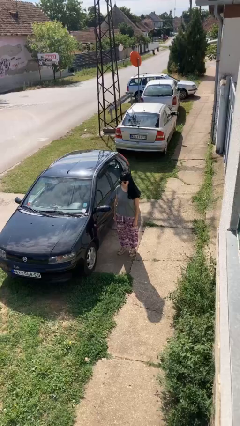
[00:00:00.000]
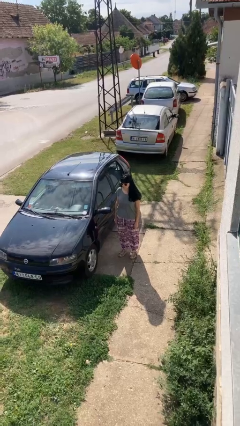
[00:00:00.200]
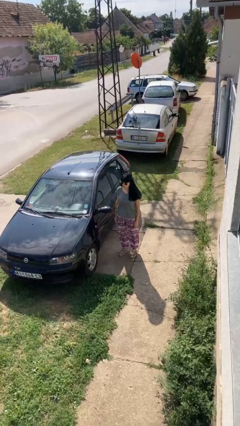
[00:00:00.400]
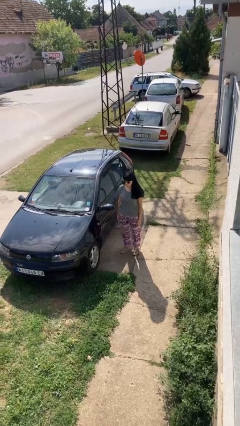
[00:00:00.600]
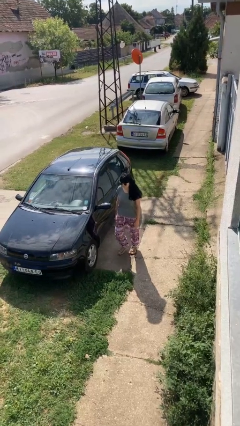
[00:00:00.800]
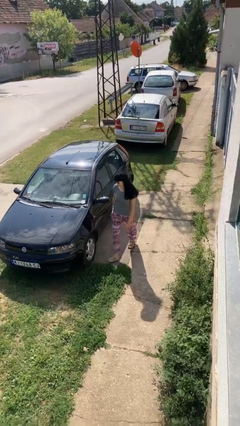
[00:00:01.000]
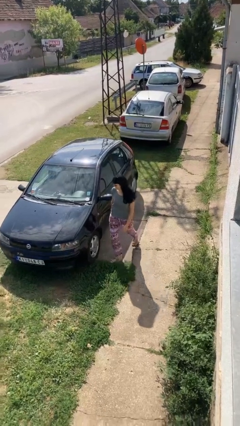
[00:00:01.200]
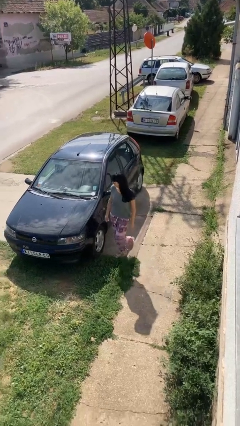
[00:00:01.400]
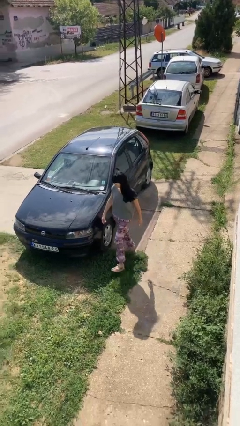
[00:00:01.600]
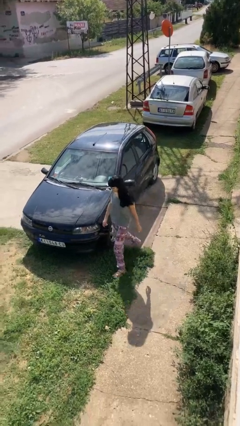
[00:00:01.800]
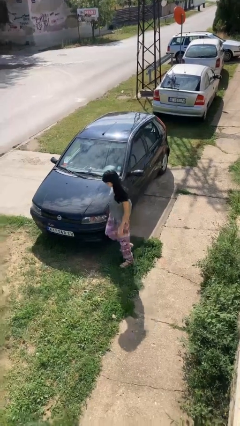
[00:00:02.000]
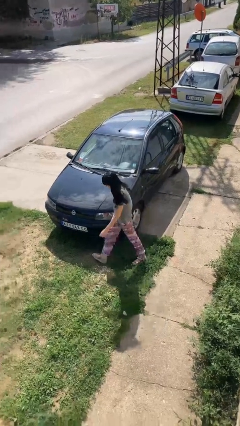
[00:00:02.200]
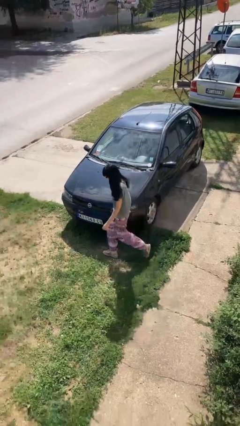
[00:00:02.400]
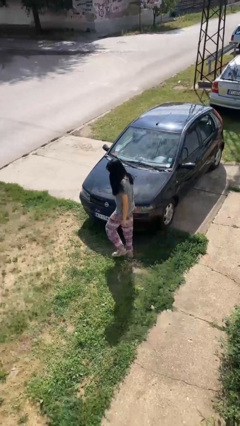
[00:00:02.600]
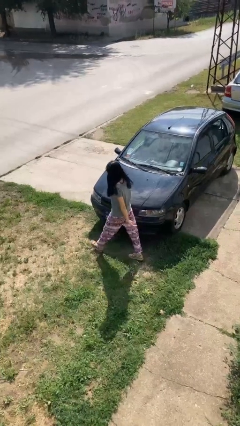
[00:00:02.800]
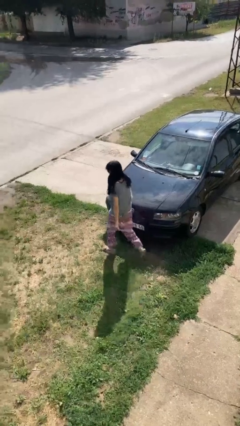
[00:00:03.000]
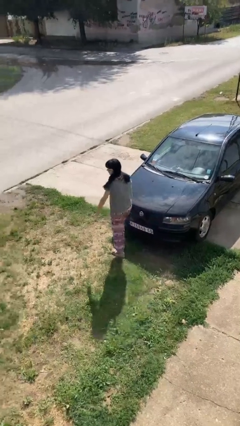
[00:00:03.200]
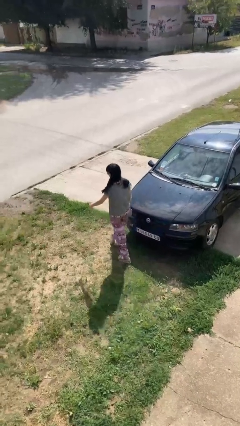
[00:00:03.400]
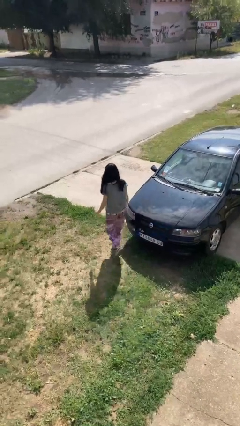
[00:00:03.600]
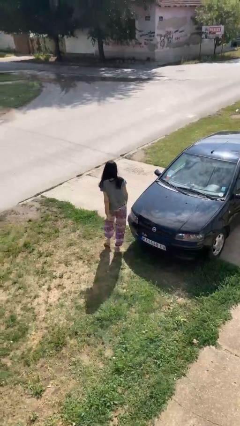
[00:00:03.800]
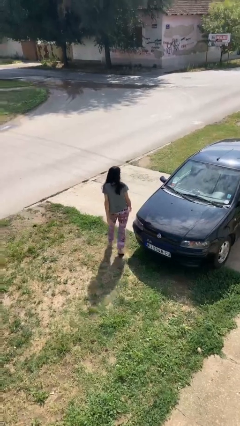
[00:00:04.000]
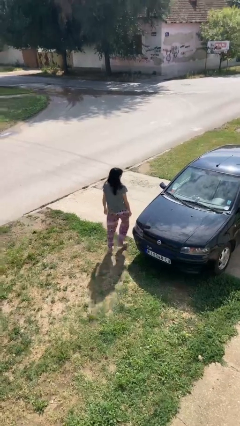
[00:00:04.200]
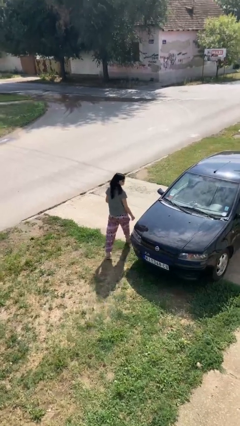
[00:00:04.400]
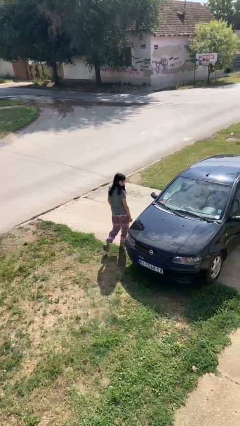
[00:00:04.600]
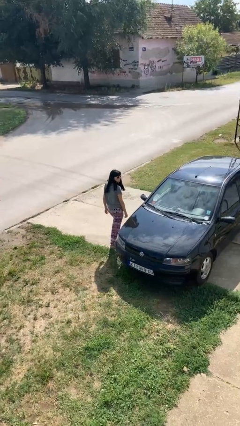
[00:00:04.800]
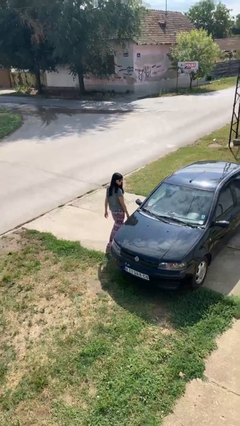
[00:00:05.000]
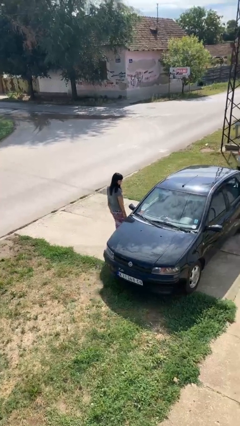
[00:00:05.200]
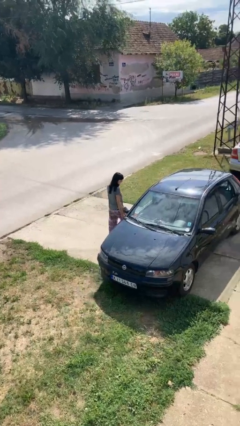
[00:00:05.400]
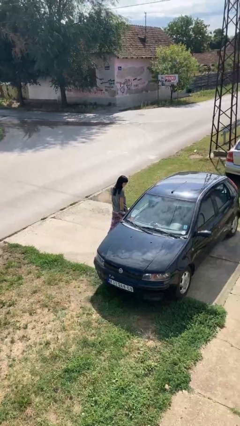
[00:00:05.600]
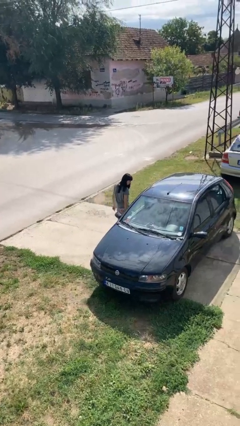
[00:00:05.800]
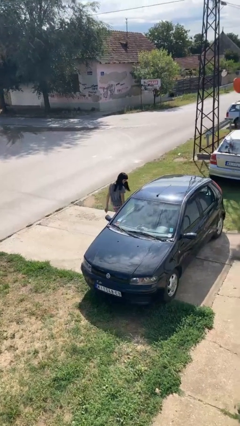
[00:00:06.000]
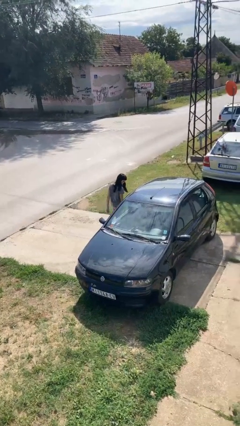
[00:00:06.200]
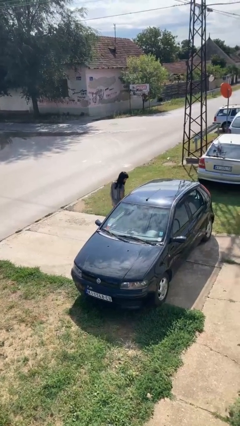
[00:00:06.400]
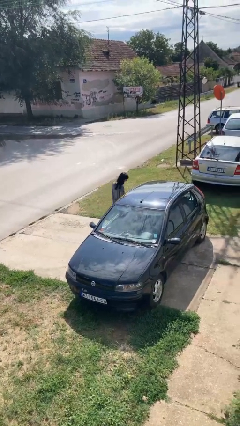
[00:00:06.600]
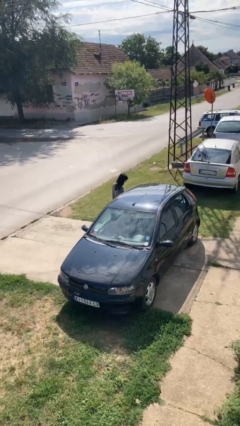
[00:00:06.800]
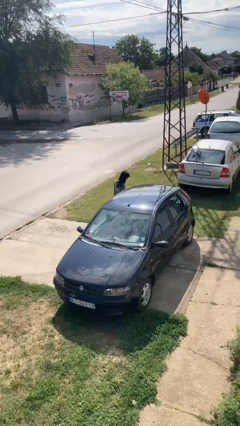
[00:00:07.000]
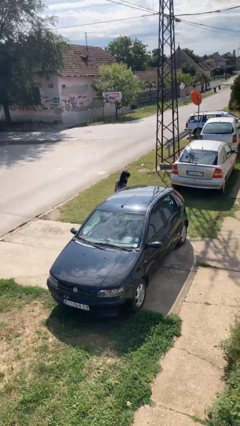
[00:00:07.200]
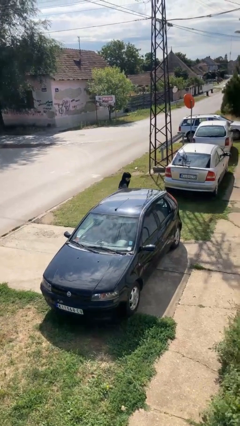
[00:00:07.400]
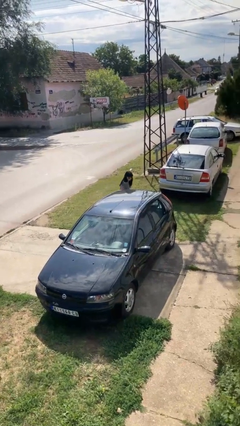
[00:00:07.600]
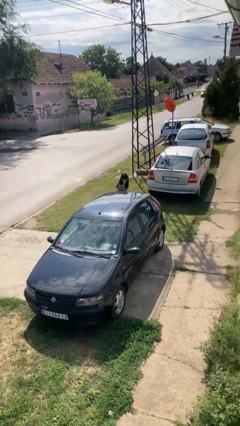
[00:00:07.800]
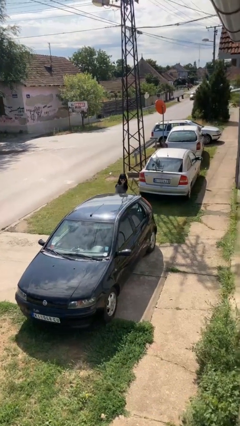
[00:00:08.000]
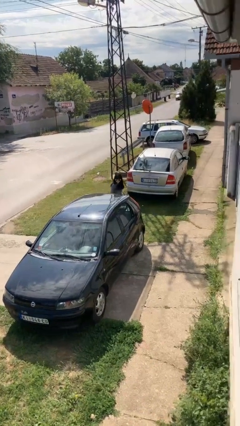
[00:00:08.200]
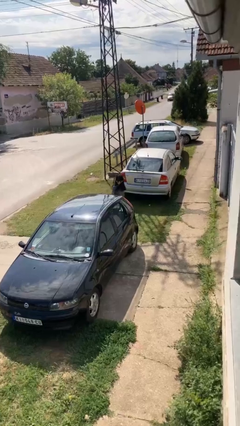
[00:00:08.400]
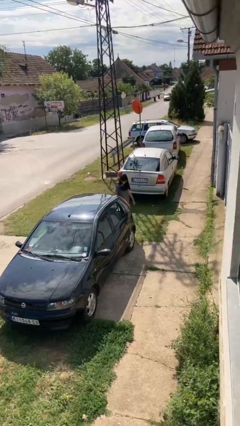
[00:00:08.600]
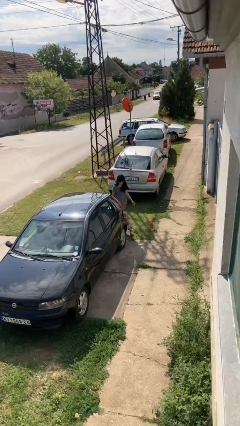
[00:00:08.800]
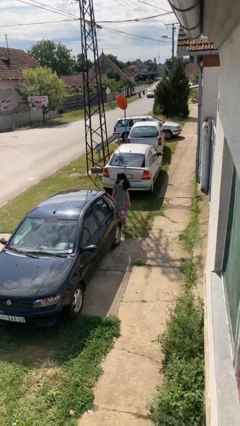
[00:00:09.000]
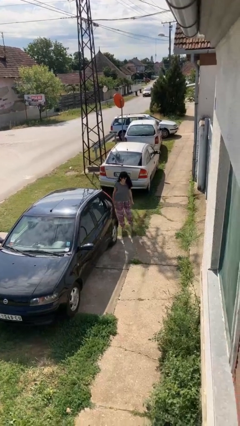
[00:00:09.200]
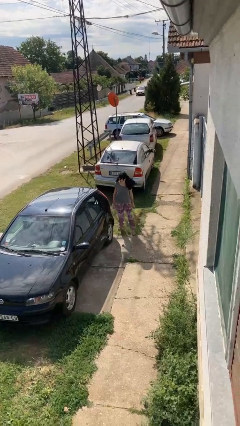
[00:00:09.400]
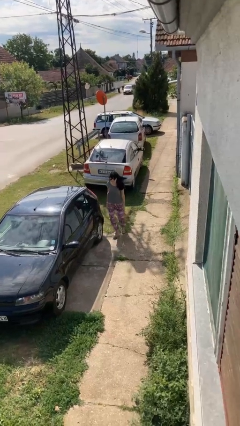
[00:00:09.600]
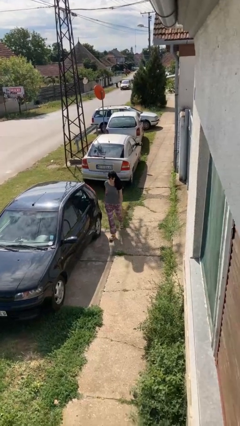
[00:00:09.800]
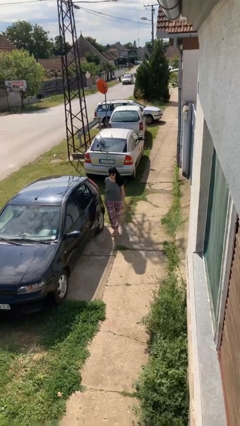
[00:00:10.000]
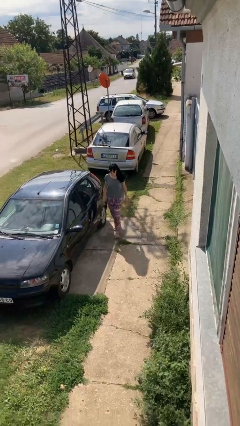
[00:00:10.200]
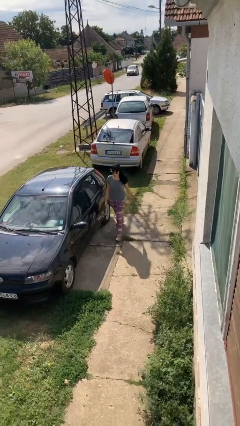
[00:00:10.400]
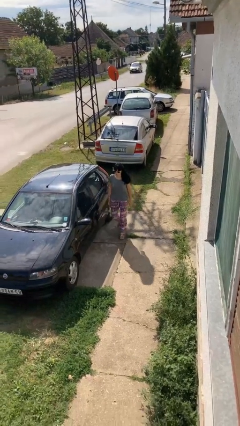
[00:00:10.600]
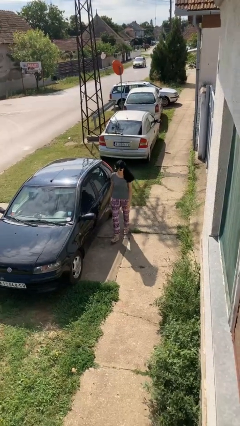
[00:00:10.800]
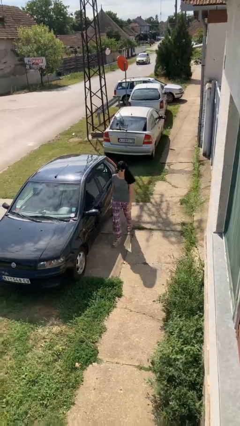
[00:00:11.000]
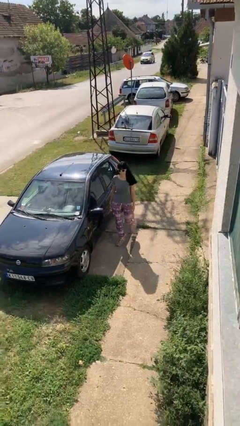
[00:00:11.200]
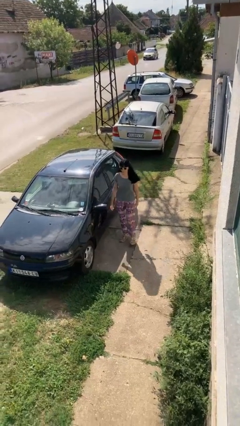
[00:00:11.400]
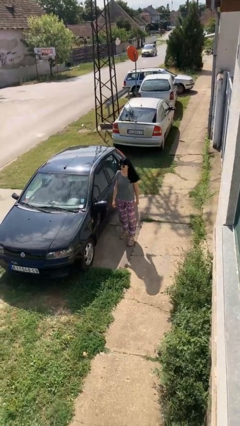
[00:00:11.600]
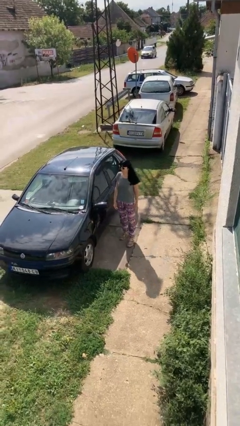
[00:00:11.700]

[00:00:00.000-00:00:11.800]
person walks around car

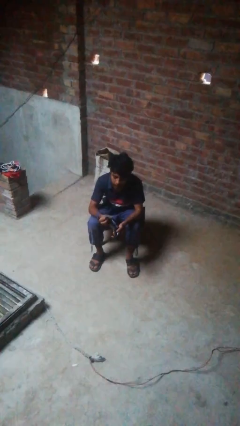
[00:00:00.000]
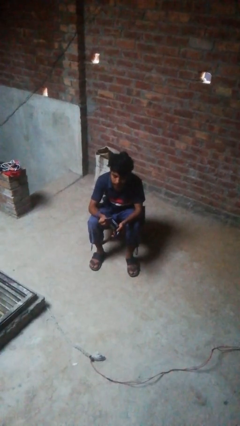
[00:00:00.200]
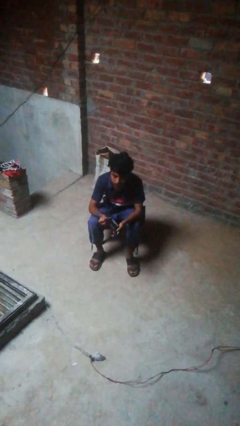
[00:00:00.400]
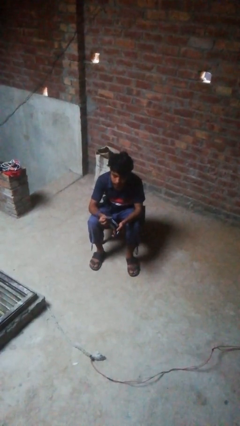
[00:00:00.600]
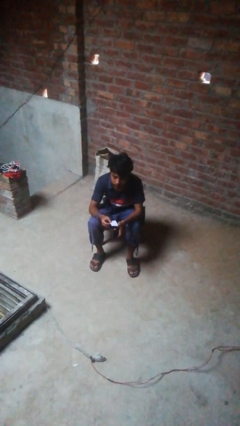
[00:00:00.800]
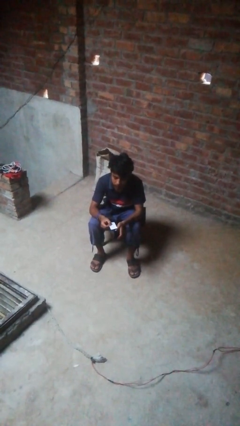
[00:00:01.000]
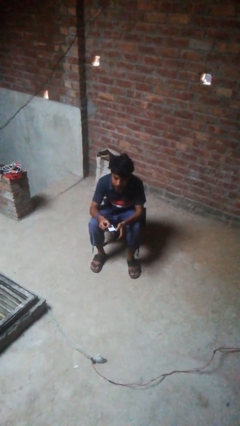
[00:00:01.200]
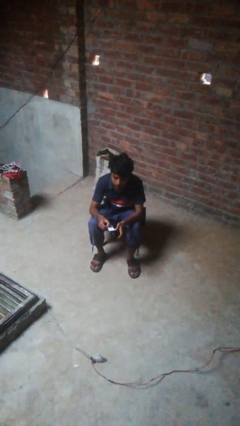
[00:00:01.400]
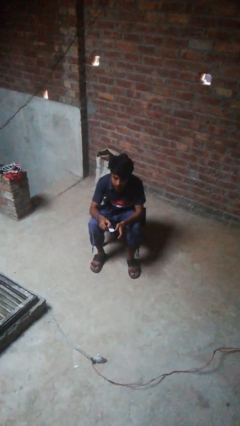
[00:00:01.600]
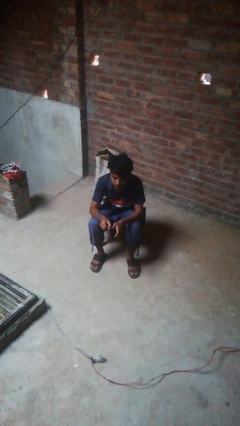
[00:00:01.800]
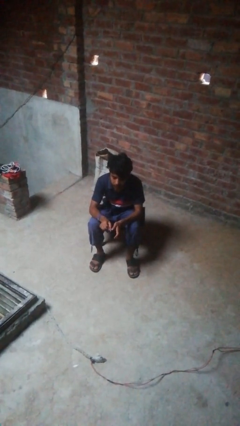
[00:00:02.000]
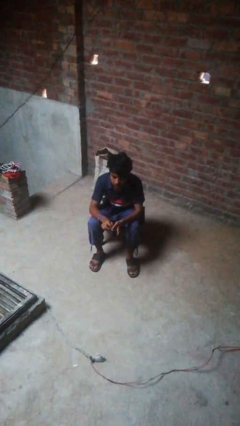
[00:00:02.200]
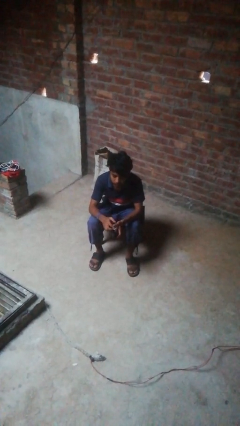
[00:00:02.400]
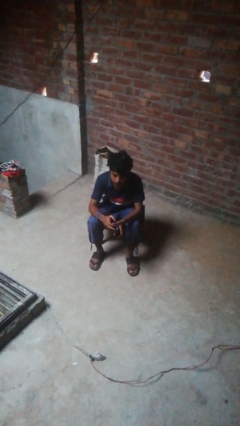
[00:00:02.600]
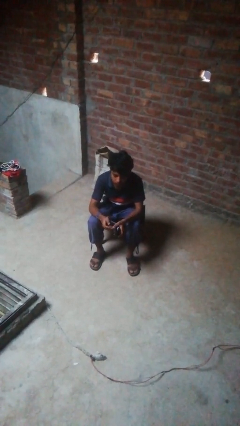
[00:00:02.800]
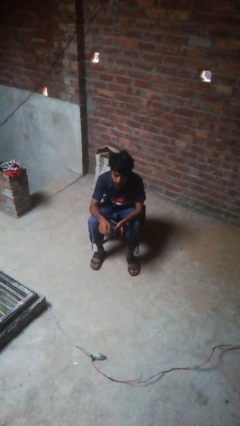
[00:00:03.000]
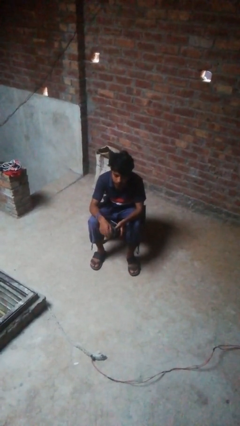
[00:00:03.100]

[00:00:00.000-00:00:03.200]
person puts object into purse

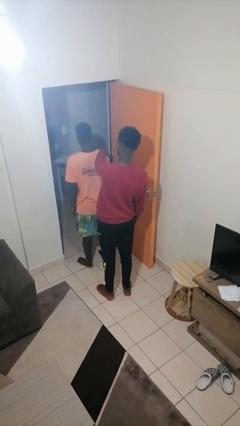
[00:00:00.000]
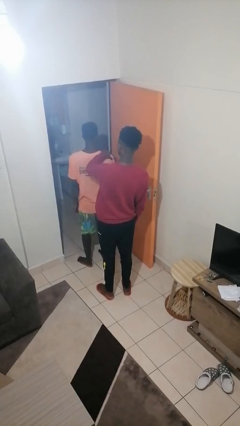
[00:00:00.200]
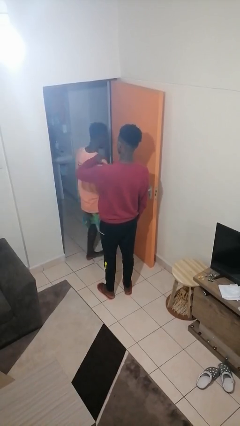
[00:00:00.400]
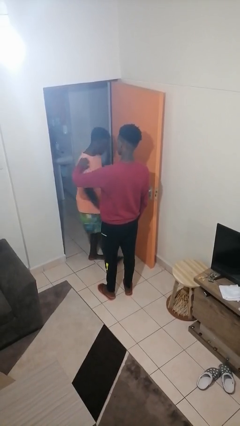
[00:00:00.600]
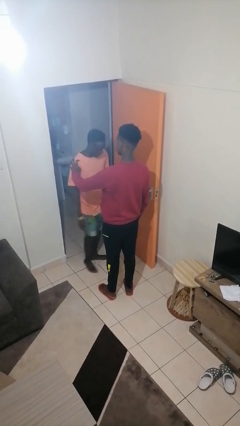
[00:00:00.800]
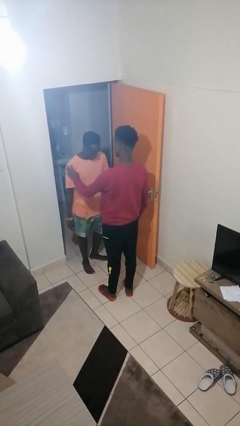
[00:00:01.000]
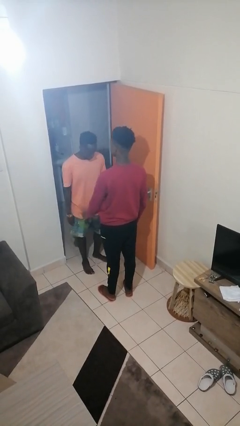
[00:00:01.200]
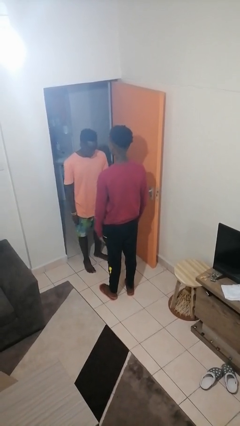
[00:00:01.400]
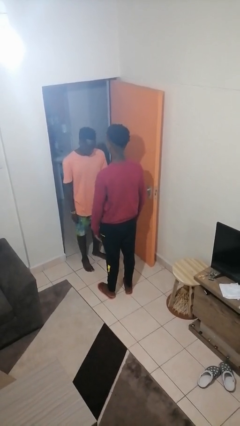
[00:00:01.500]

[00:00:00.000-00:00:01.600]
person spins person around

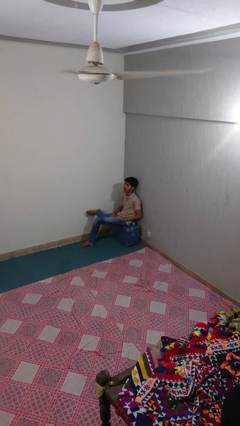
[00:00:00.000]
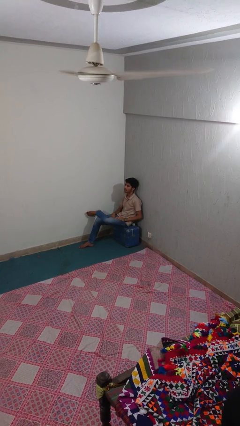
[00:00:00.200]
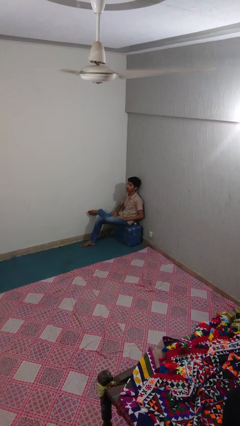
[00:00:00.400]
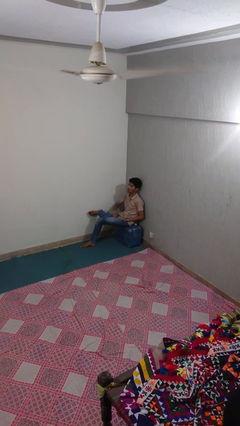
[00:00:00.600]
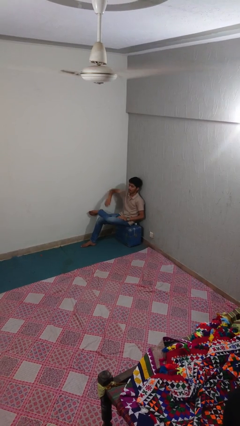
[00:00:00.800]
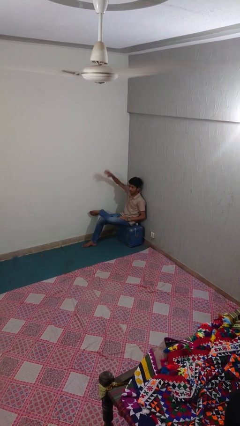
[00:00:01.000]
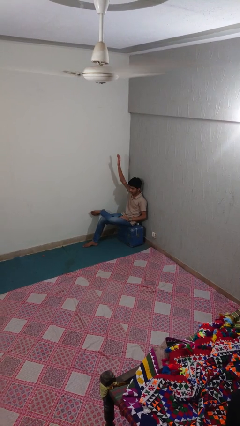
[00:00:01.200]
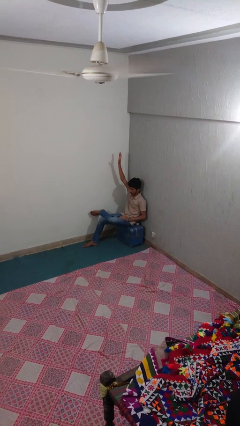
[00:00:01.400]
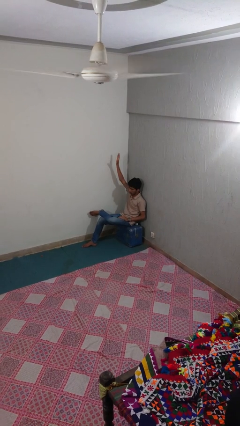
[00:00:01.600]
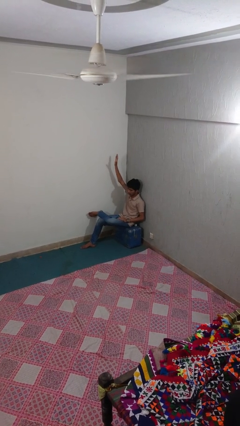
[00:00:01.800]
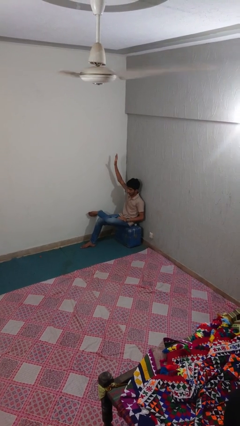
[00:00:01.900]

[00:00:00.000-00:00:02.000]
person gestures raise hand
